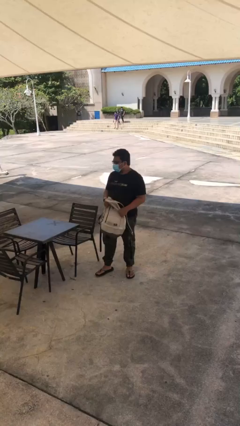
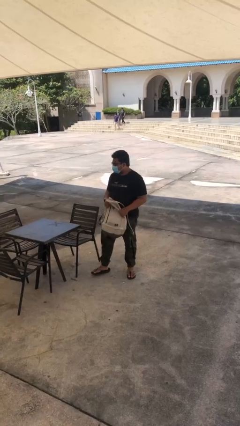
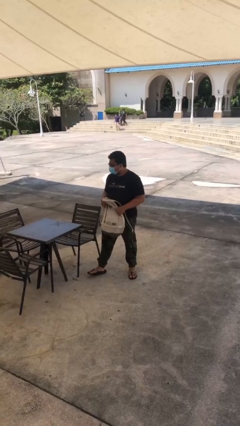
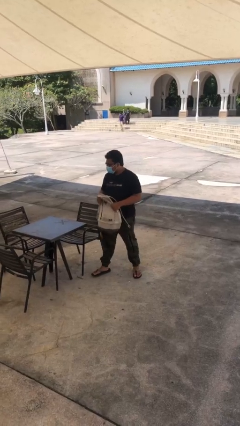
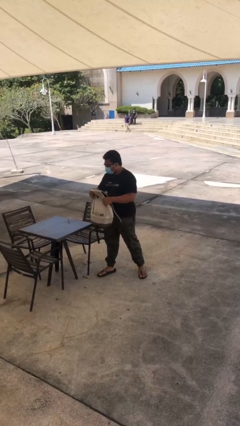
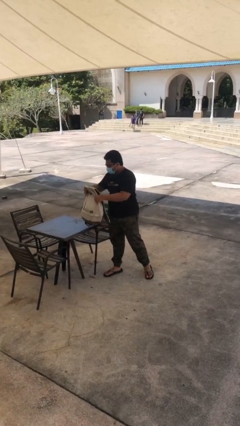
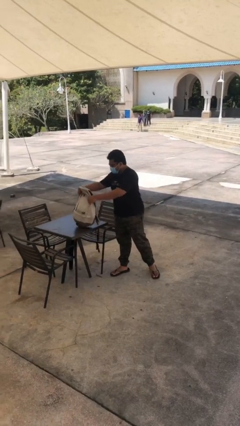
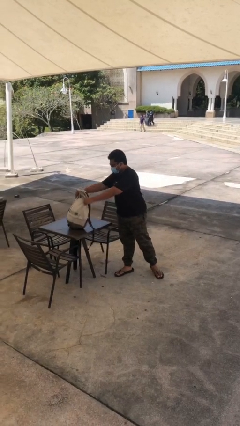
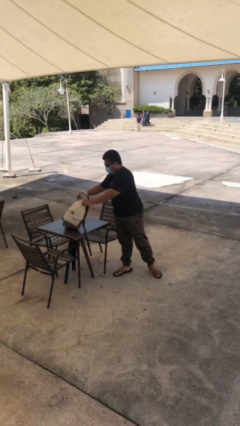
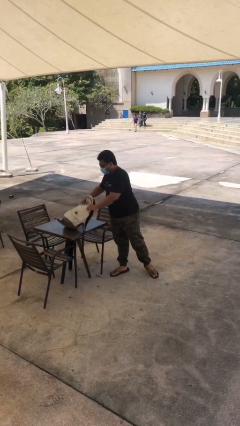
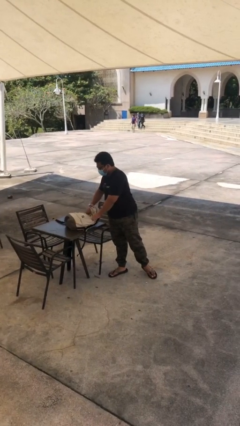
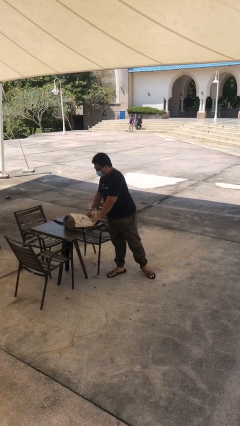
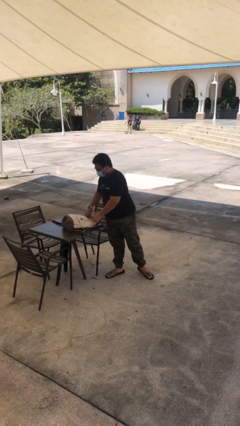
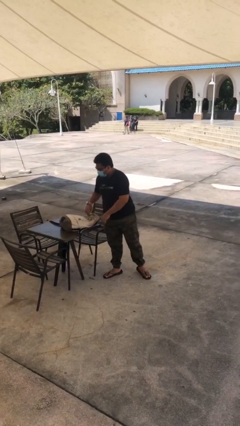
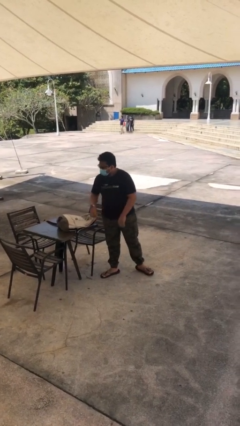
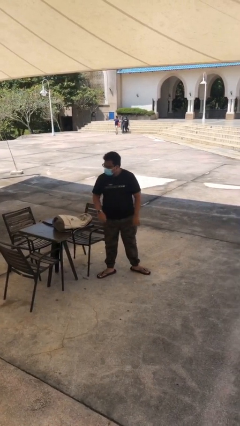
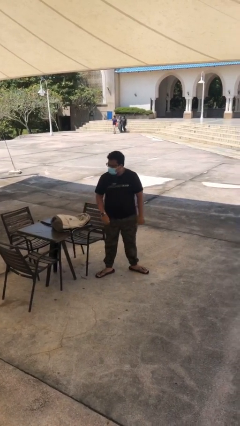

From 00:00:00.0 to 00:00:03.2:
person puts down object on table

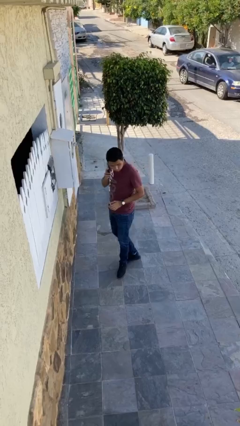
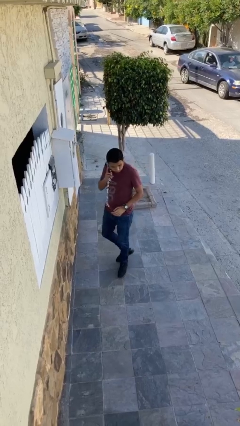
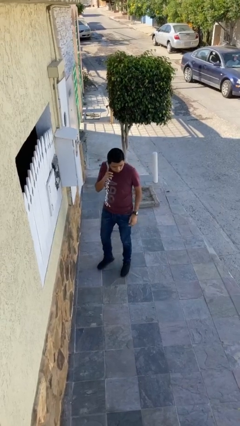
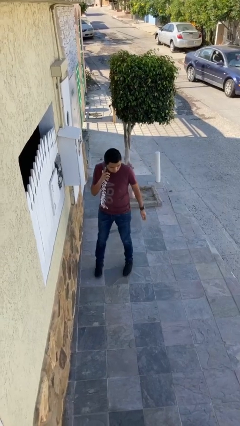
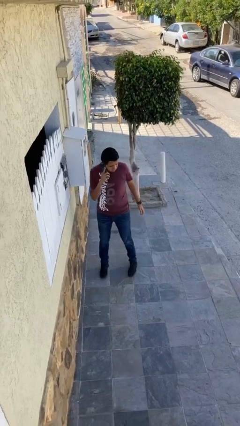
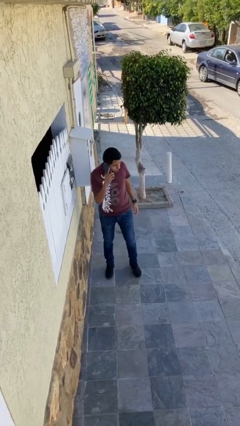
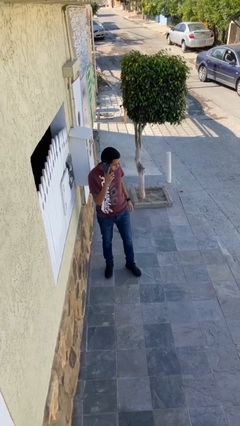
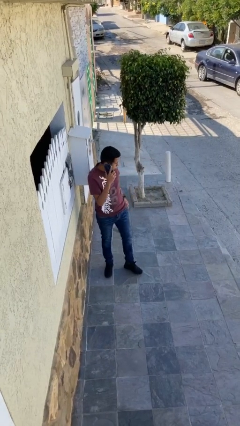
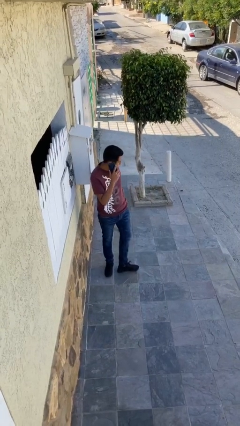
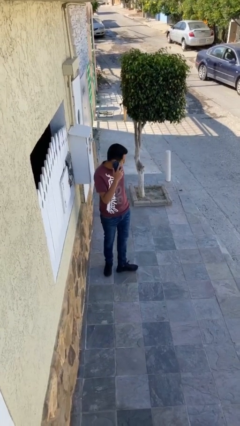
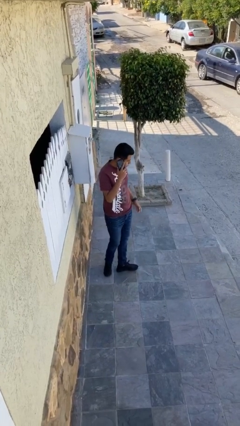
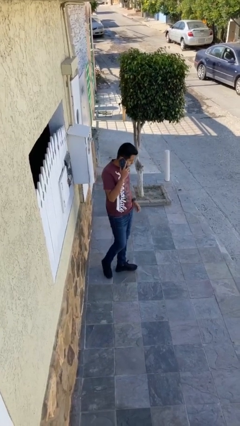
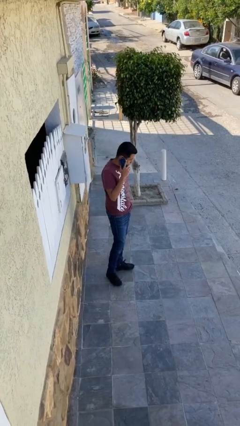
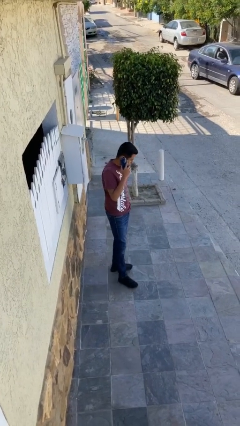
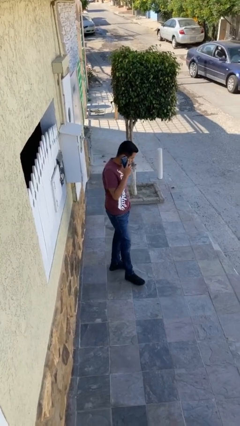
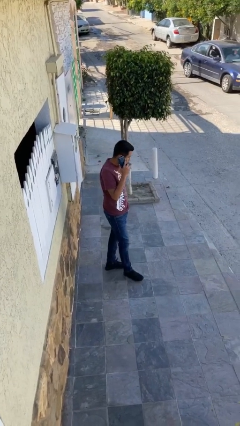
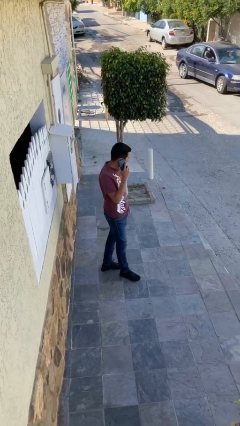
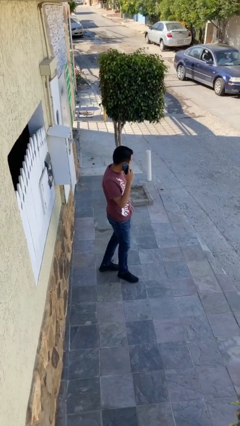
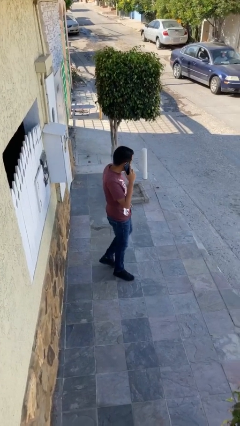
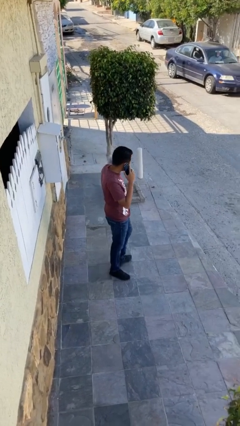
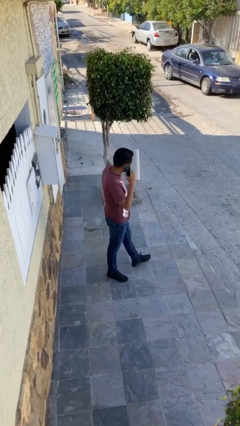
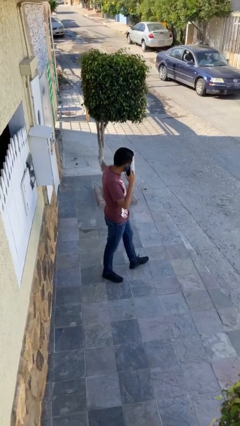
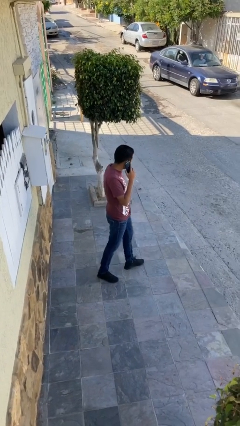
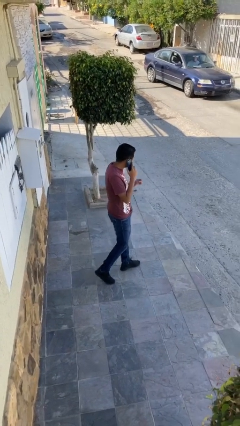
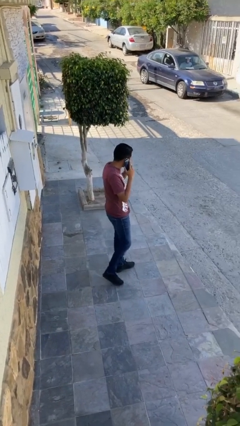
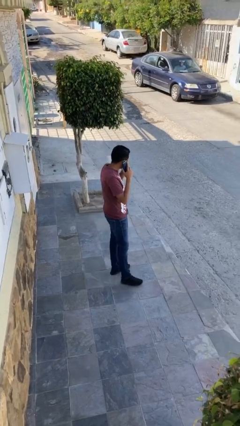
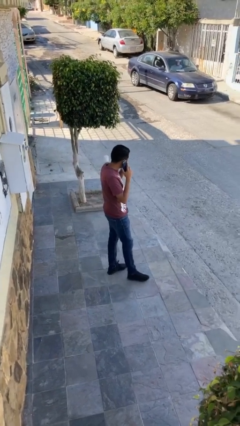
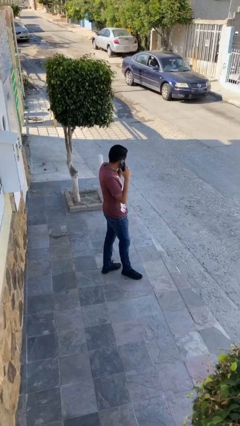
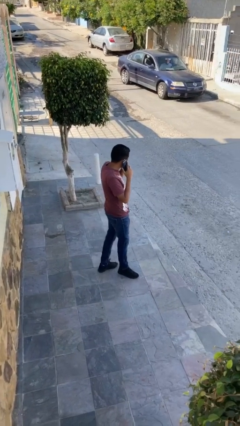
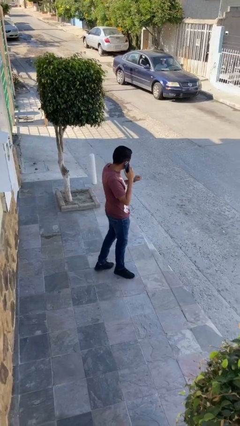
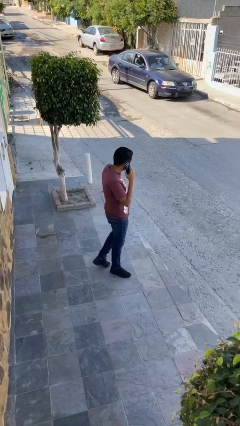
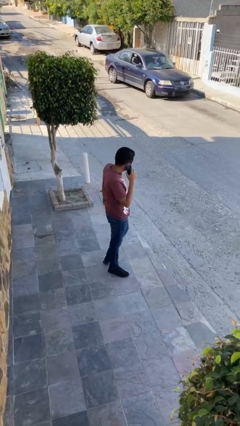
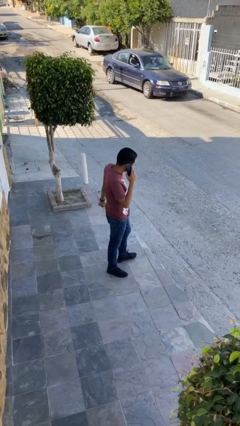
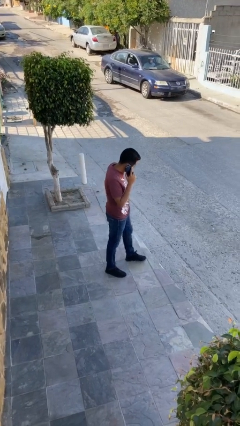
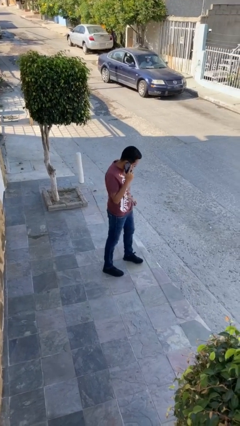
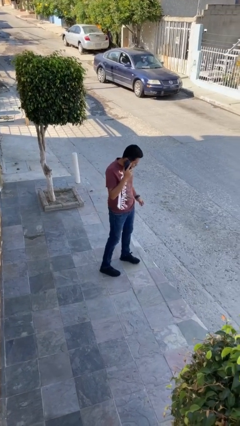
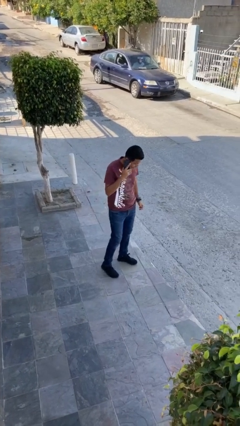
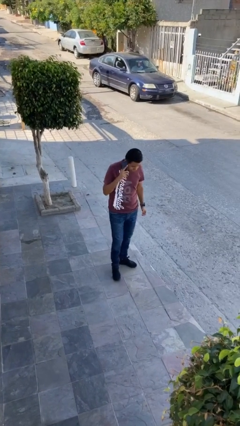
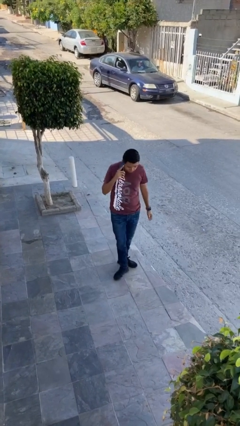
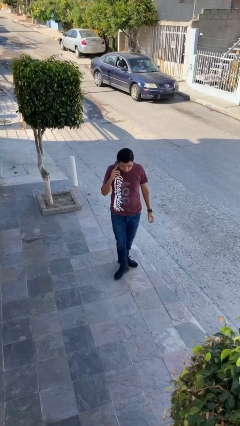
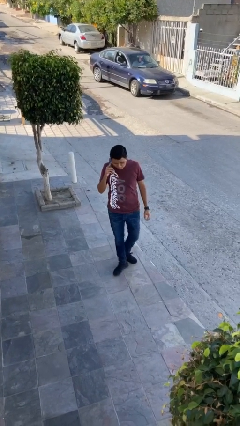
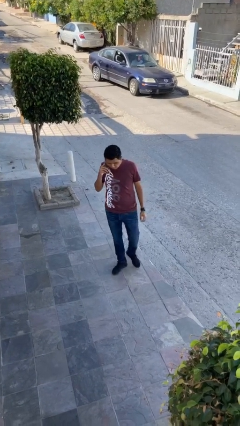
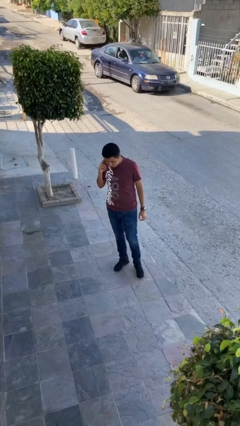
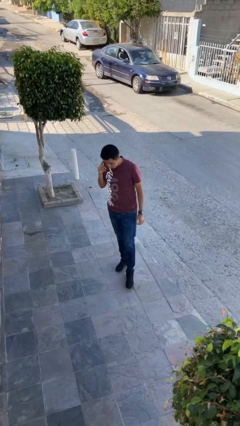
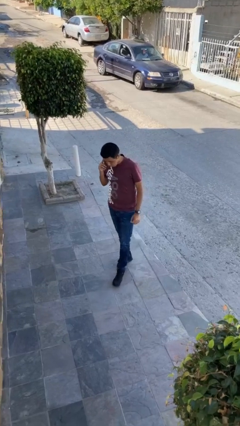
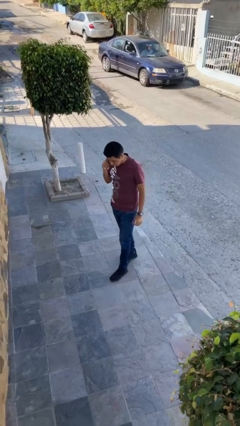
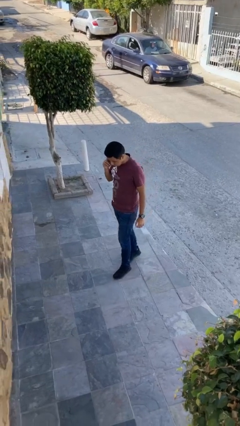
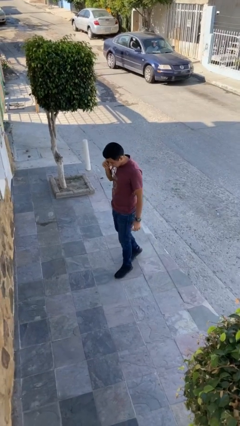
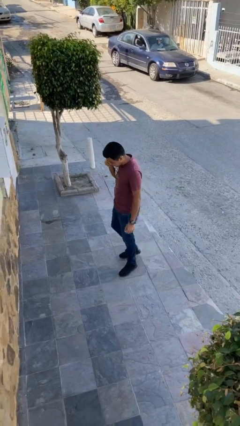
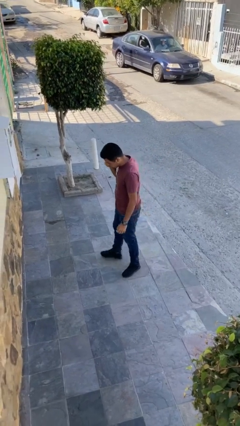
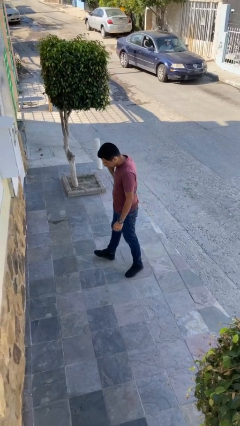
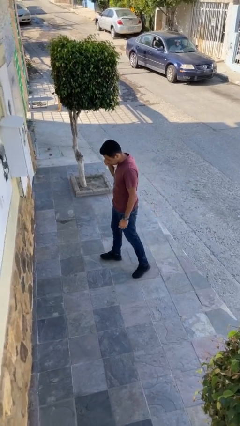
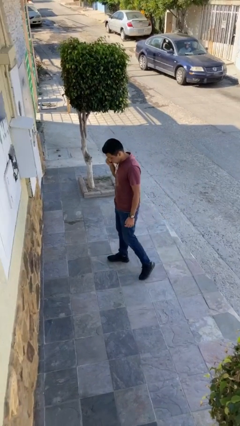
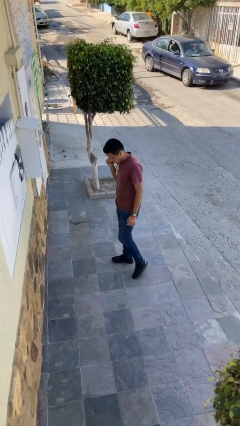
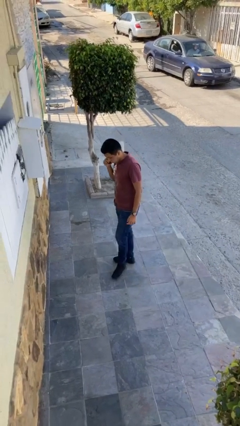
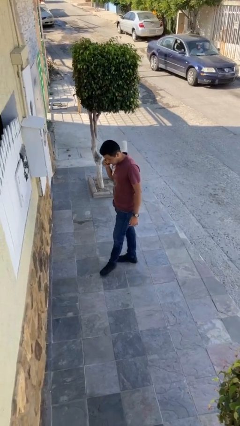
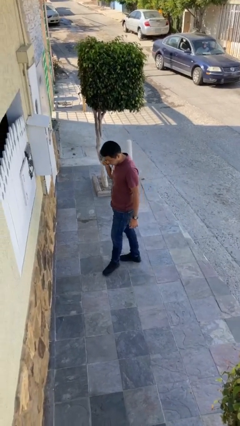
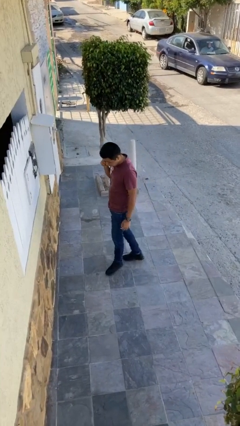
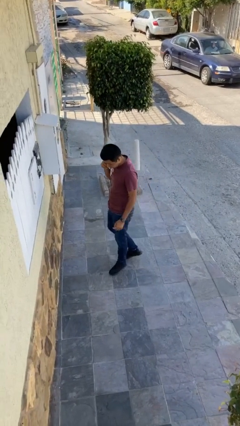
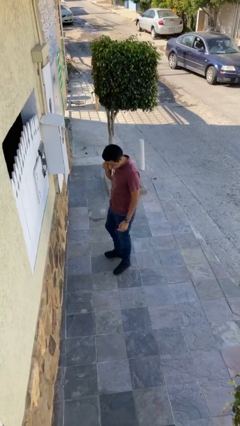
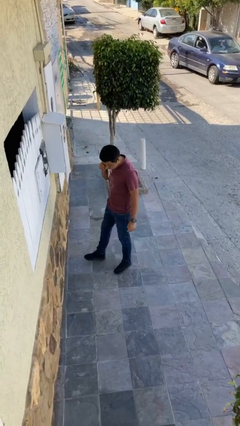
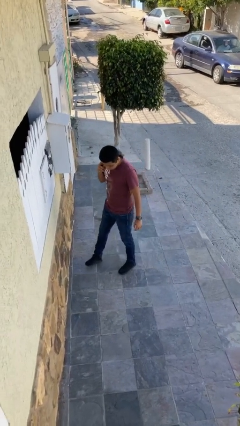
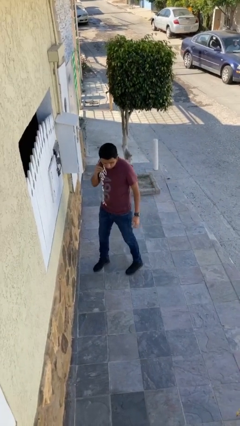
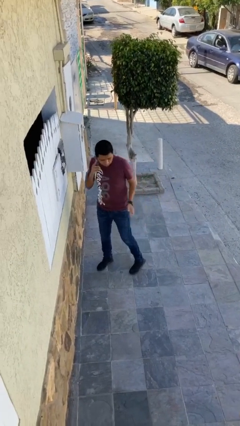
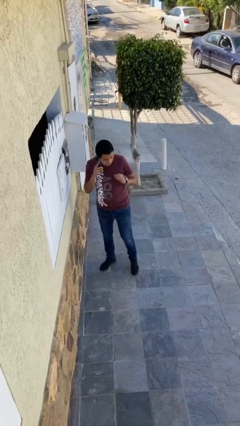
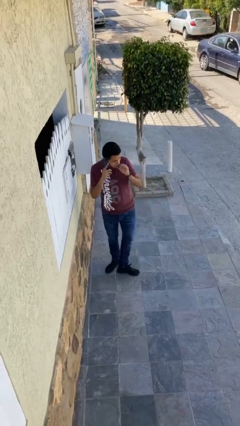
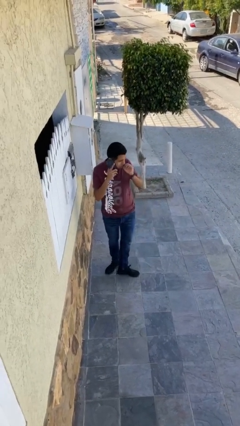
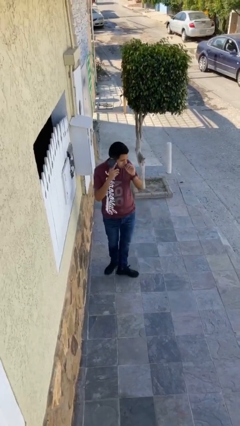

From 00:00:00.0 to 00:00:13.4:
person talks on phone

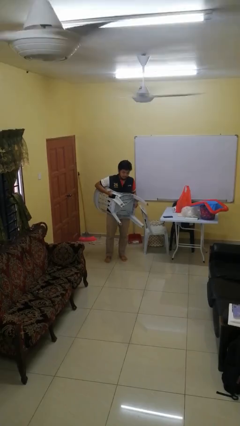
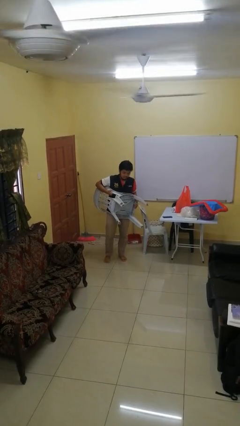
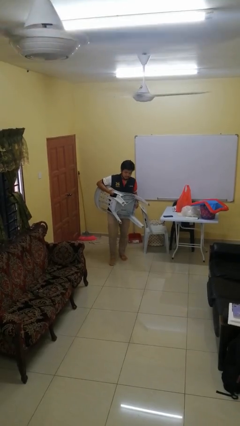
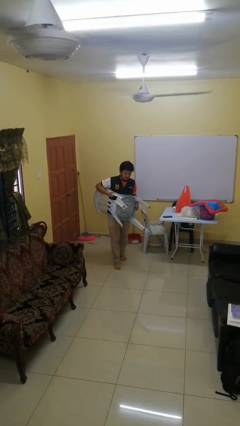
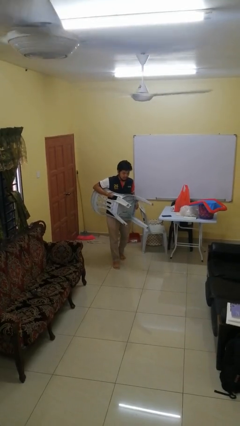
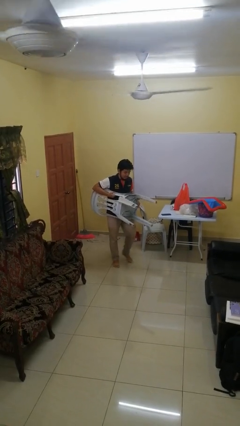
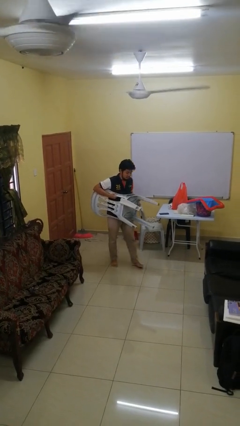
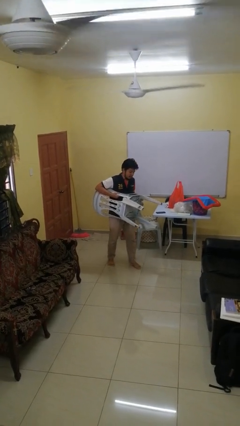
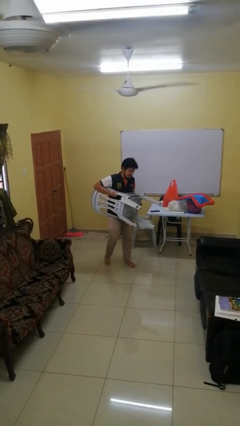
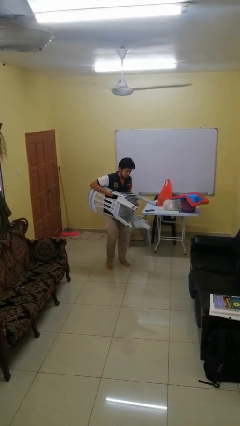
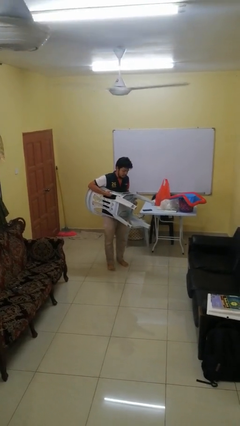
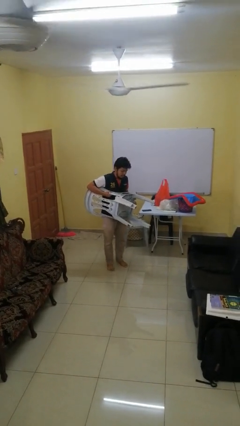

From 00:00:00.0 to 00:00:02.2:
person carries furniture
